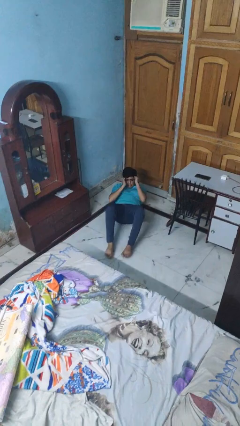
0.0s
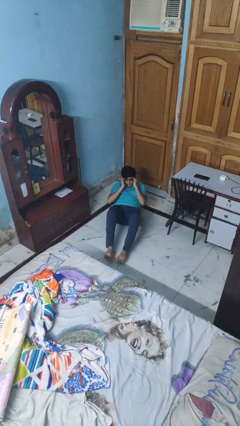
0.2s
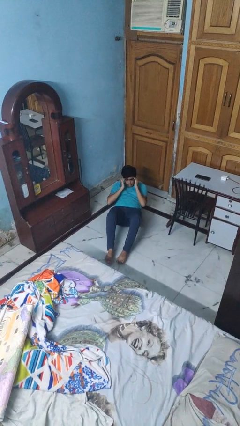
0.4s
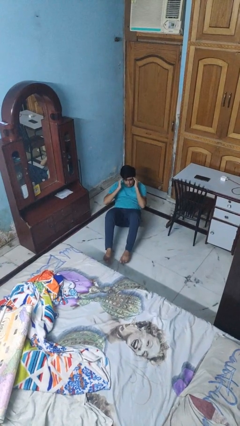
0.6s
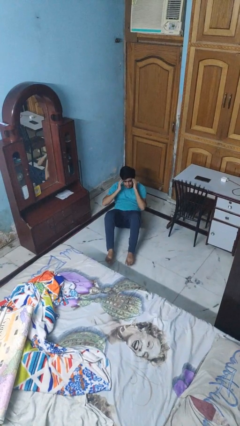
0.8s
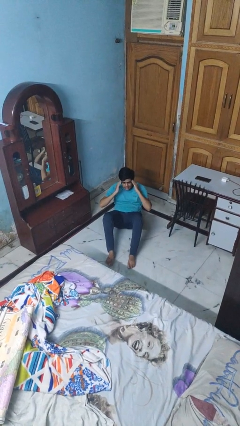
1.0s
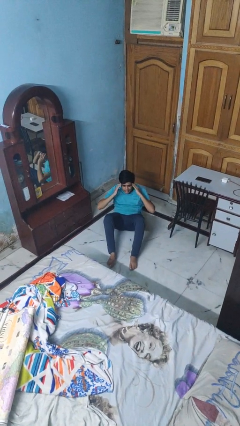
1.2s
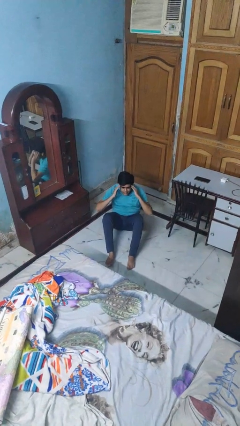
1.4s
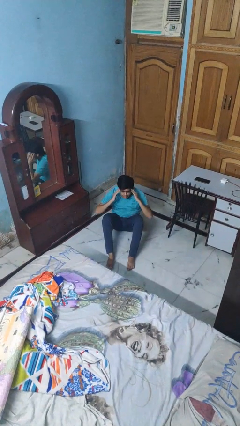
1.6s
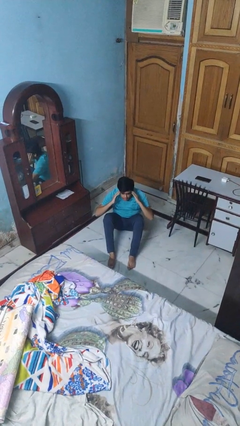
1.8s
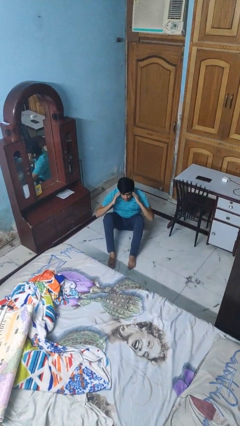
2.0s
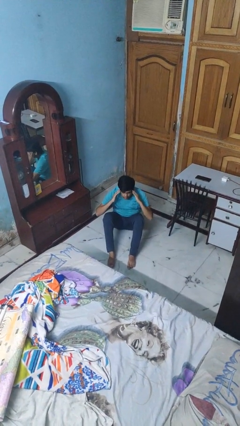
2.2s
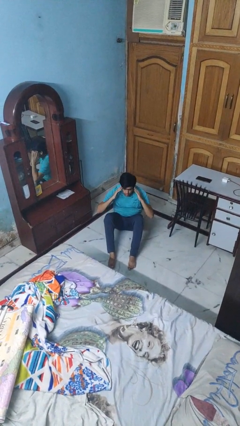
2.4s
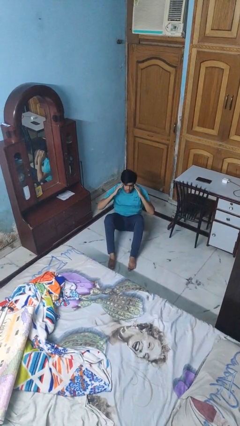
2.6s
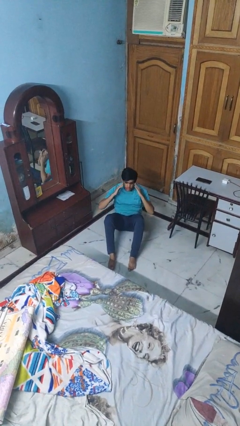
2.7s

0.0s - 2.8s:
person exercises with situp

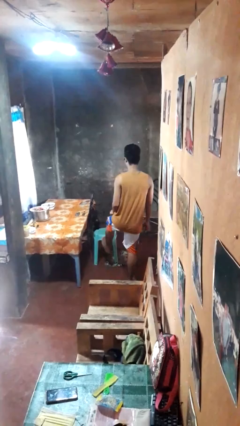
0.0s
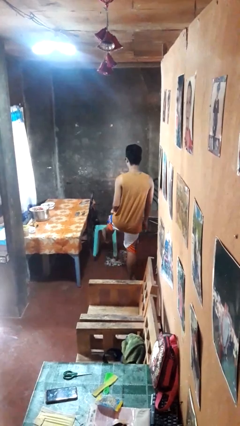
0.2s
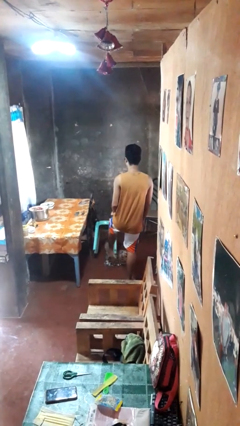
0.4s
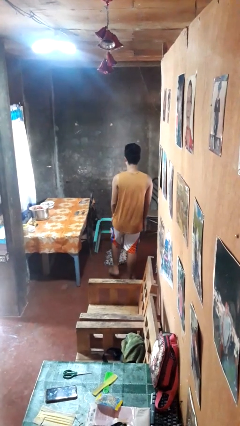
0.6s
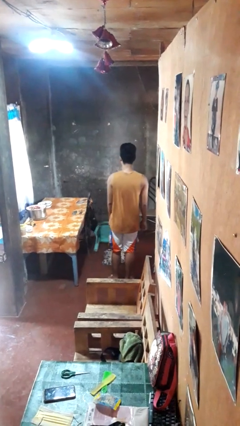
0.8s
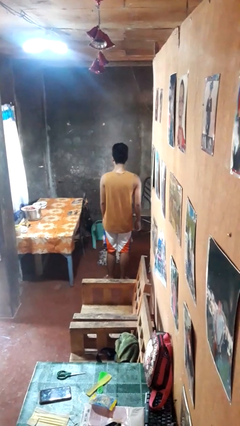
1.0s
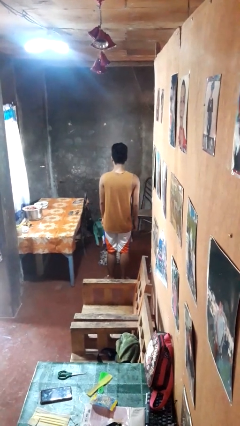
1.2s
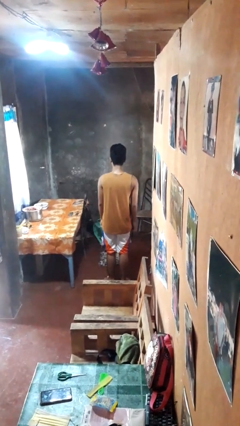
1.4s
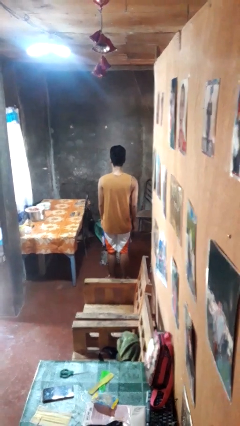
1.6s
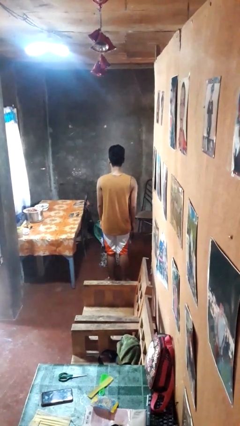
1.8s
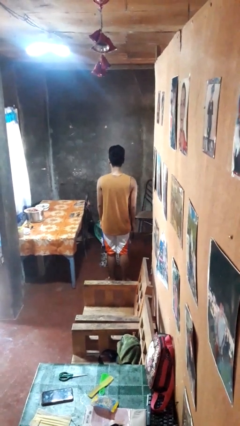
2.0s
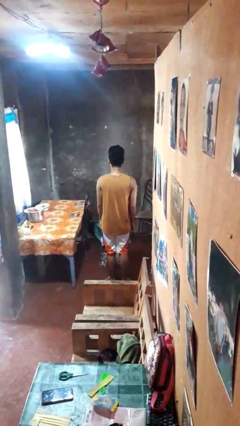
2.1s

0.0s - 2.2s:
person knocks over furniture

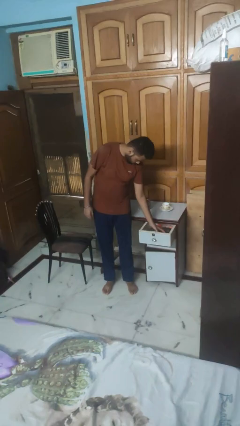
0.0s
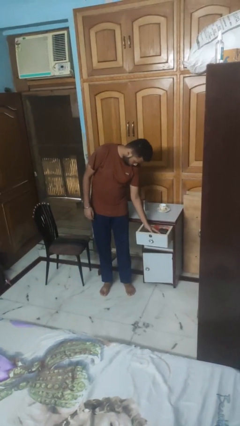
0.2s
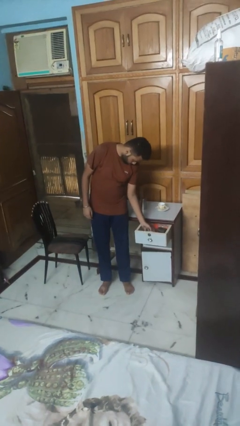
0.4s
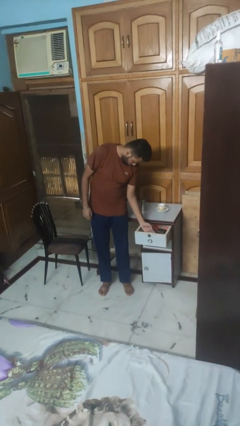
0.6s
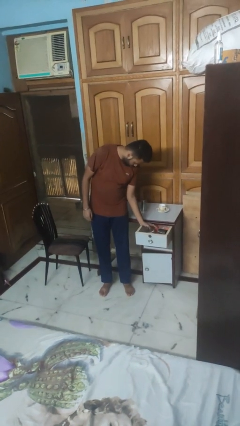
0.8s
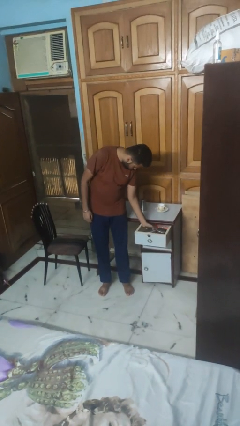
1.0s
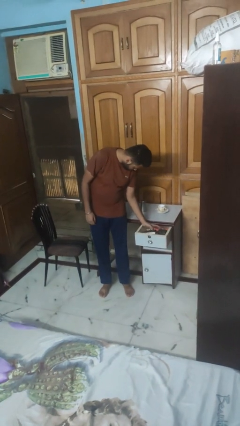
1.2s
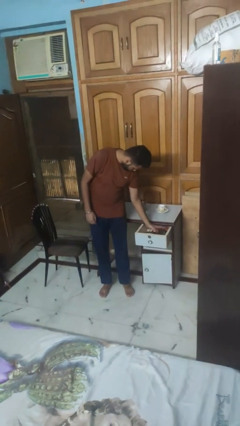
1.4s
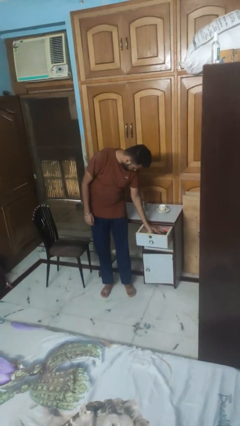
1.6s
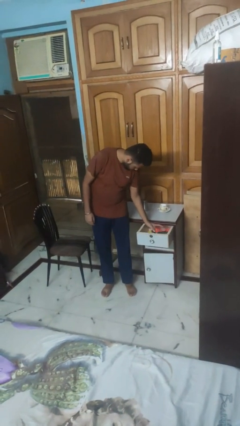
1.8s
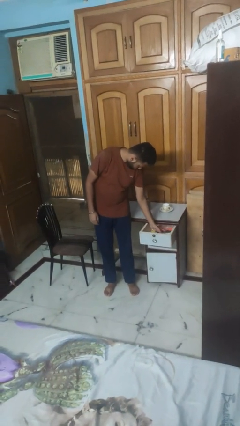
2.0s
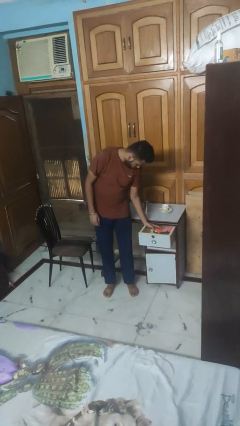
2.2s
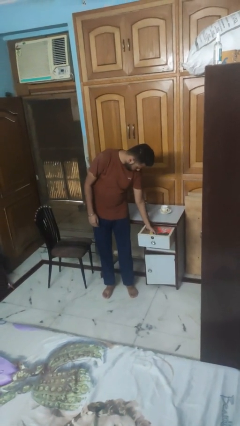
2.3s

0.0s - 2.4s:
person searches in kitchen drawer

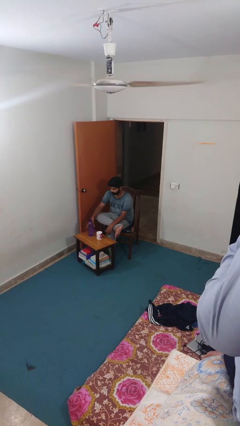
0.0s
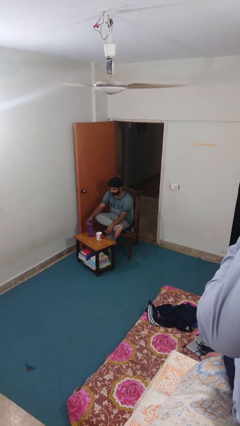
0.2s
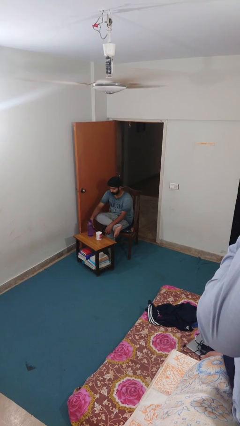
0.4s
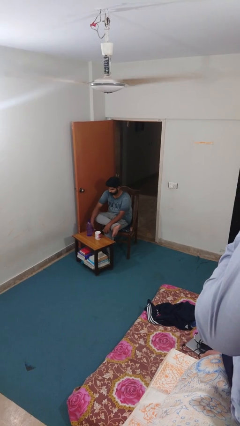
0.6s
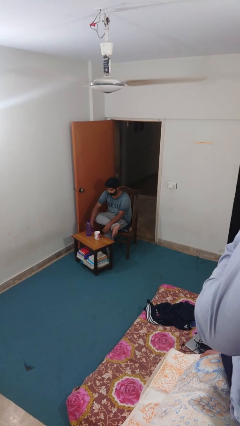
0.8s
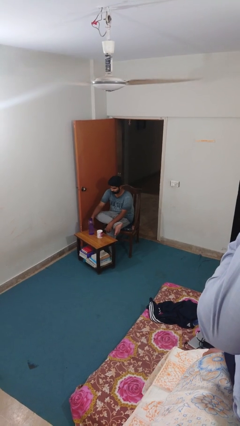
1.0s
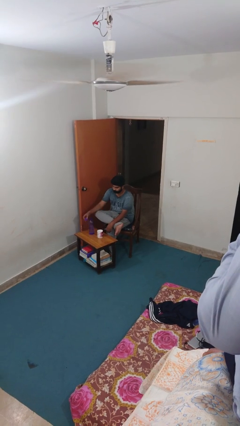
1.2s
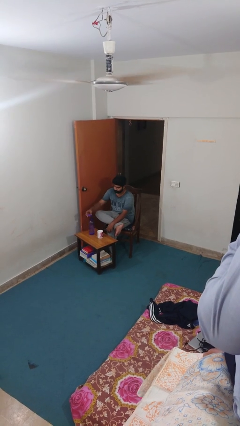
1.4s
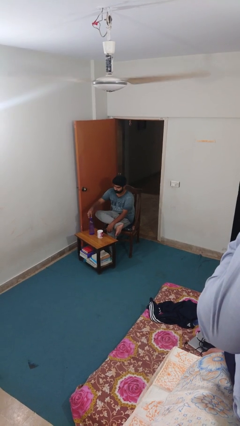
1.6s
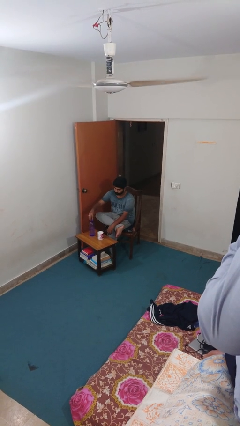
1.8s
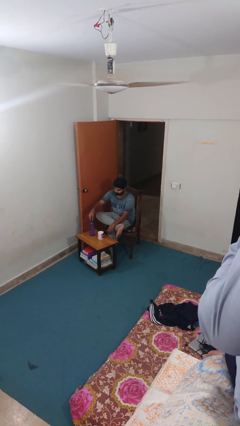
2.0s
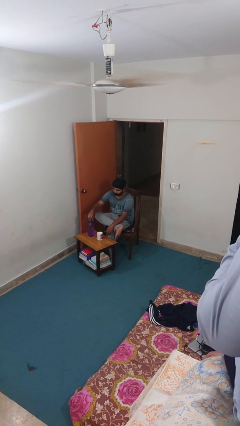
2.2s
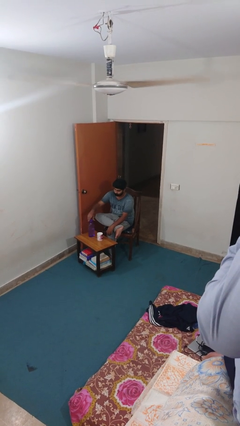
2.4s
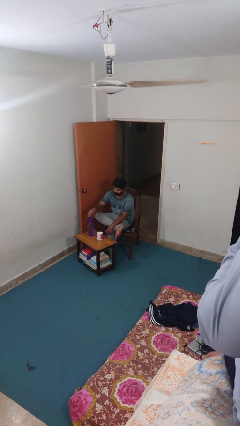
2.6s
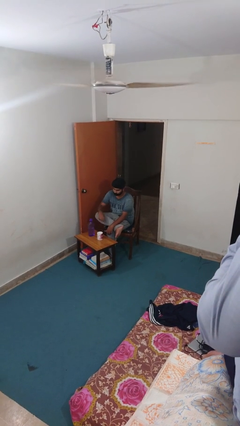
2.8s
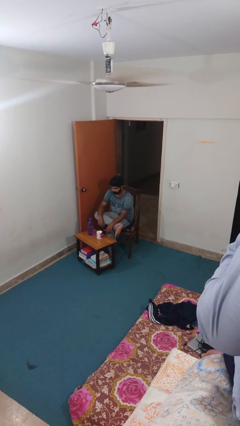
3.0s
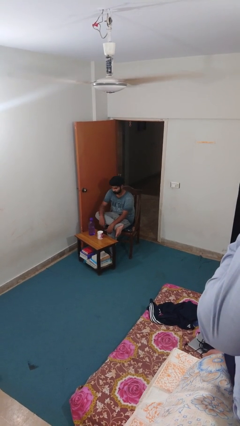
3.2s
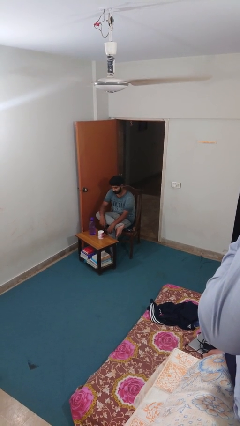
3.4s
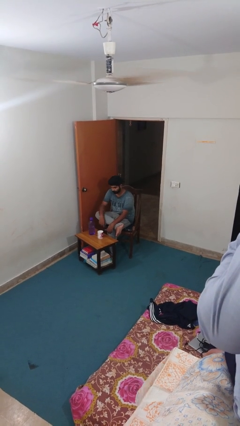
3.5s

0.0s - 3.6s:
person screws lid to bottle

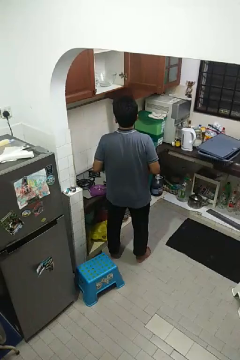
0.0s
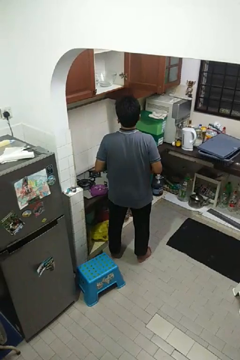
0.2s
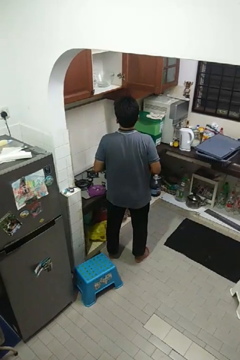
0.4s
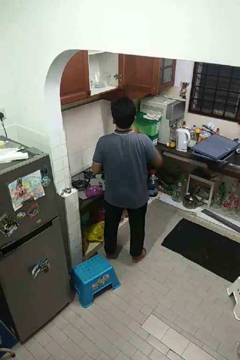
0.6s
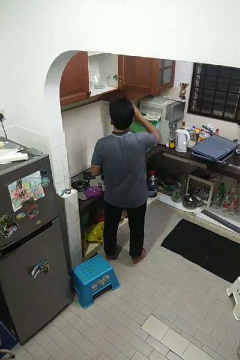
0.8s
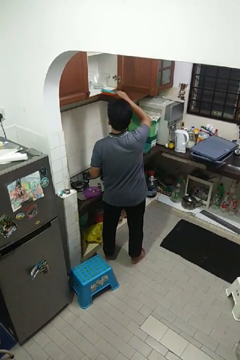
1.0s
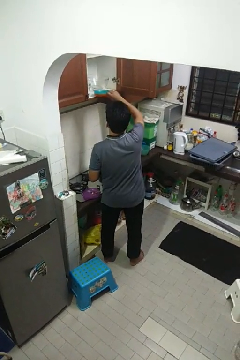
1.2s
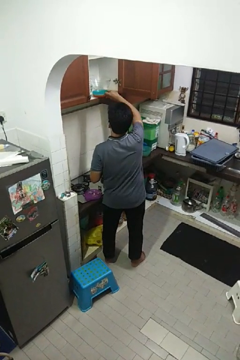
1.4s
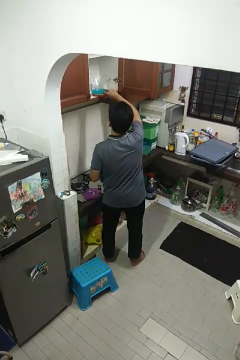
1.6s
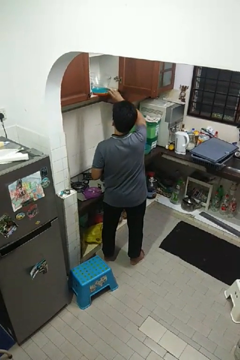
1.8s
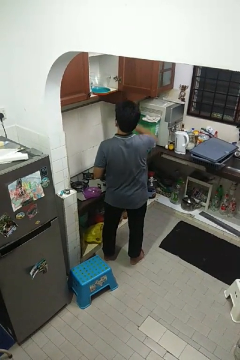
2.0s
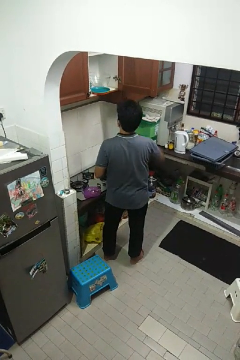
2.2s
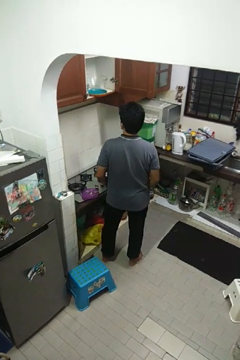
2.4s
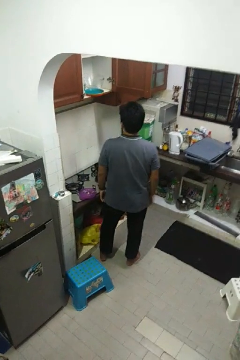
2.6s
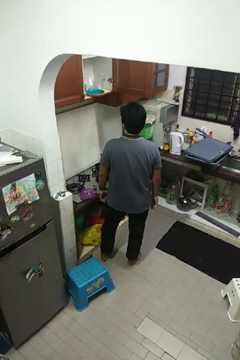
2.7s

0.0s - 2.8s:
person puts object in cabinet

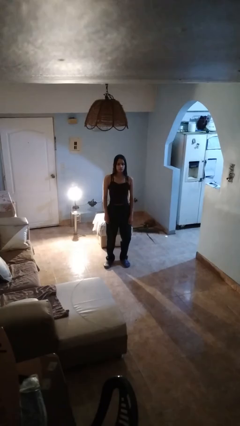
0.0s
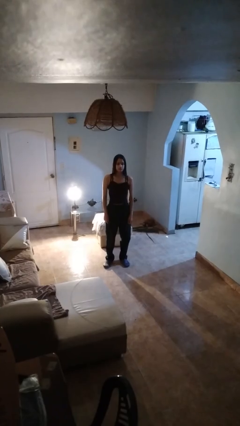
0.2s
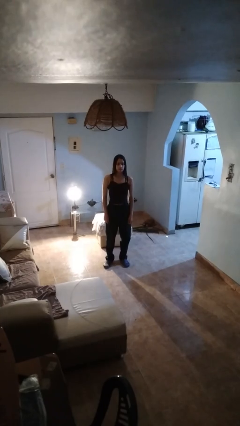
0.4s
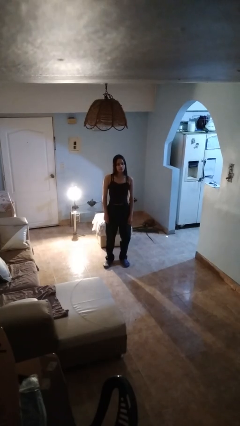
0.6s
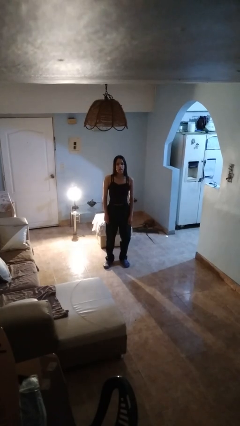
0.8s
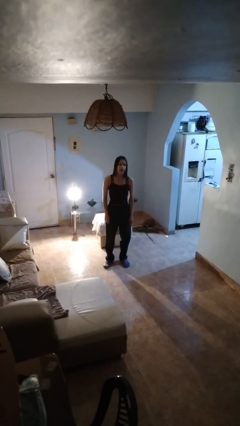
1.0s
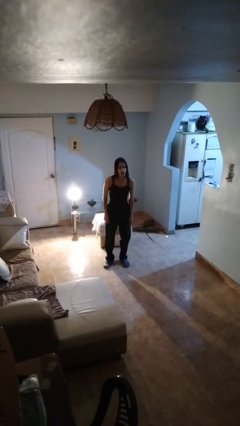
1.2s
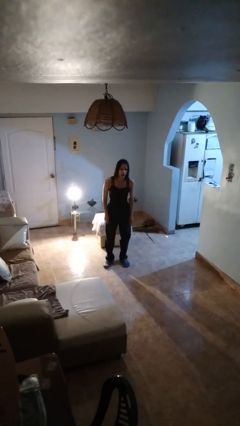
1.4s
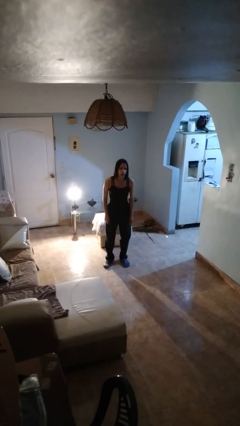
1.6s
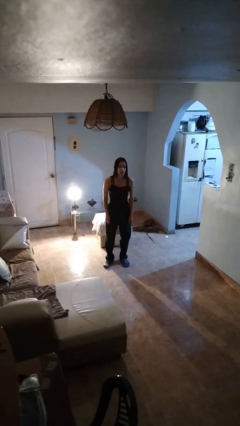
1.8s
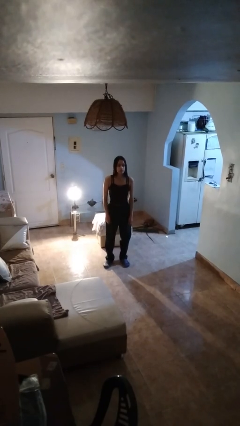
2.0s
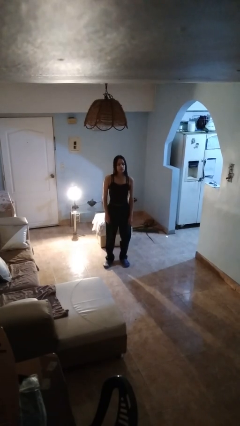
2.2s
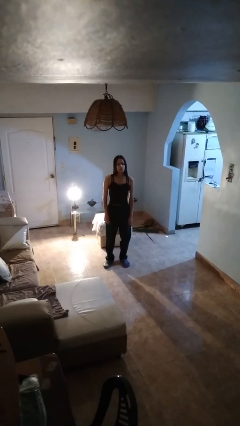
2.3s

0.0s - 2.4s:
person sticks out tongue

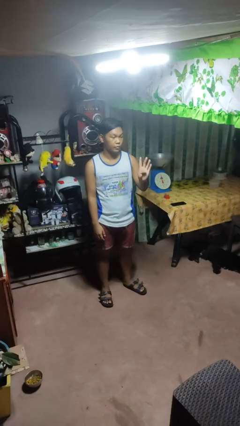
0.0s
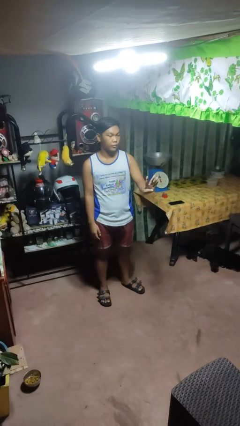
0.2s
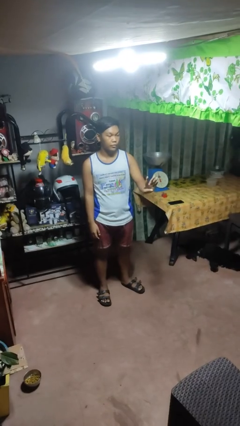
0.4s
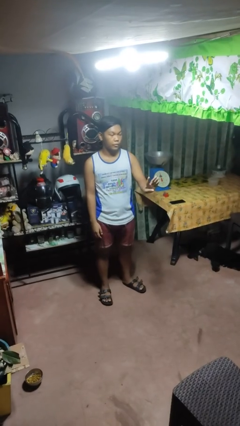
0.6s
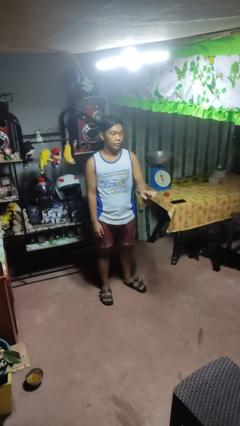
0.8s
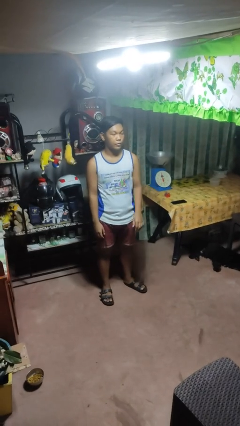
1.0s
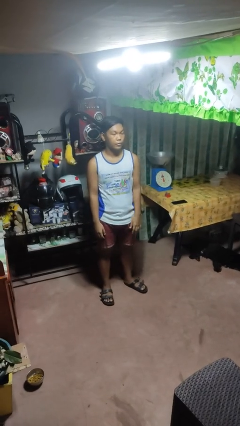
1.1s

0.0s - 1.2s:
person gestures number four

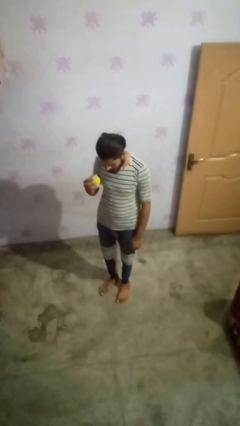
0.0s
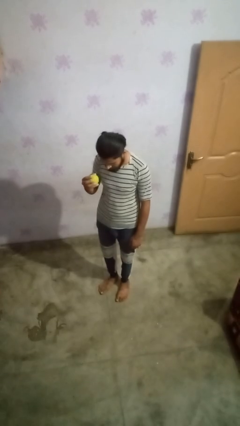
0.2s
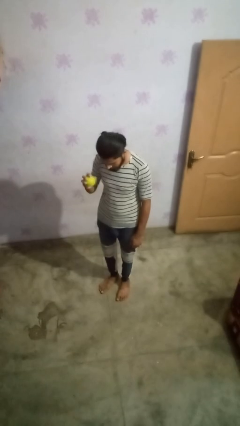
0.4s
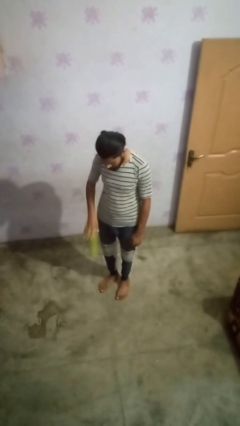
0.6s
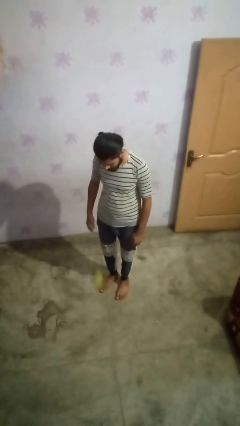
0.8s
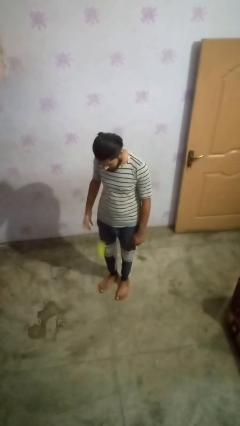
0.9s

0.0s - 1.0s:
person bounces ball on floor
